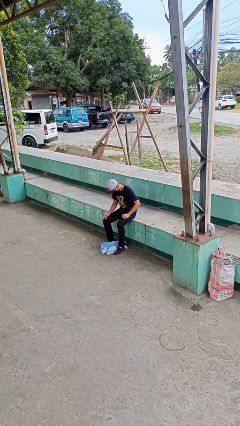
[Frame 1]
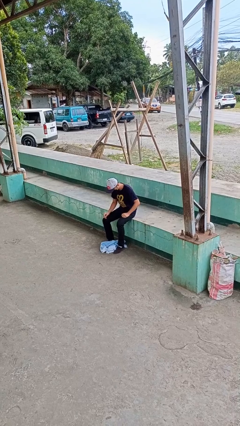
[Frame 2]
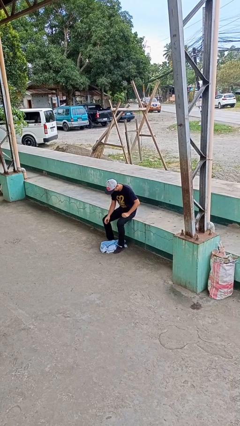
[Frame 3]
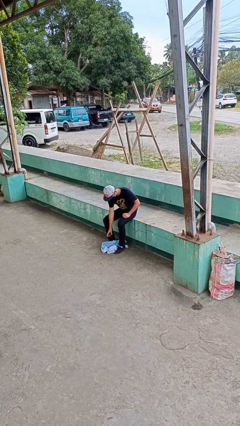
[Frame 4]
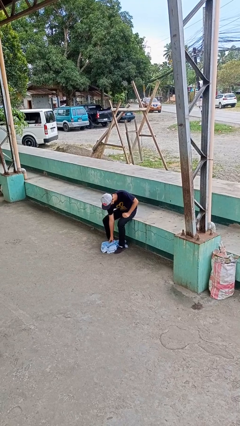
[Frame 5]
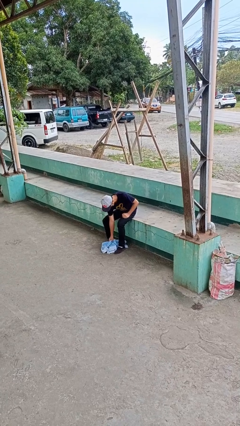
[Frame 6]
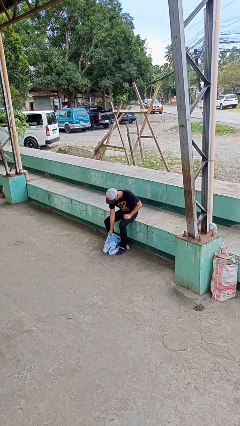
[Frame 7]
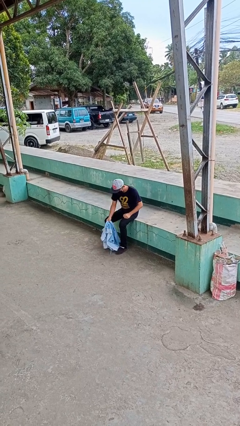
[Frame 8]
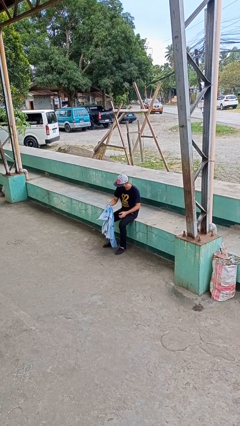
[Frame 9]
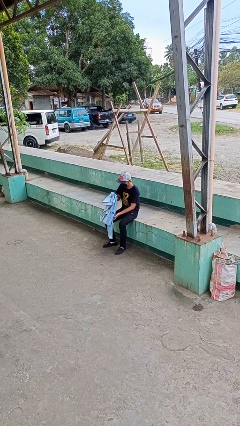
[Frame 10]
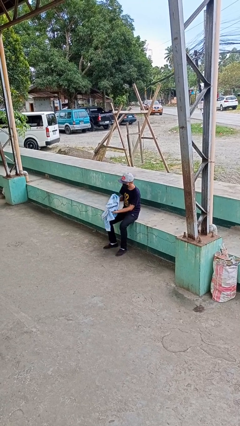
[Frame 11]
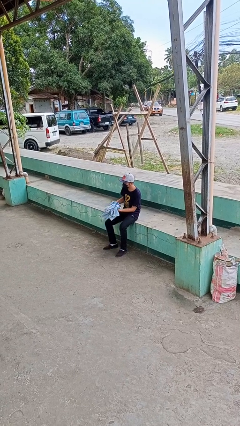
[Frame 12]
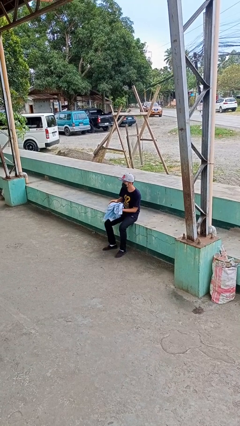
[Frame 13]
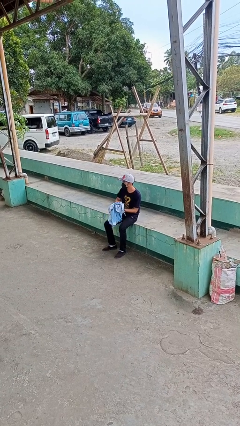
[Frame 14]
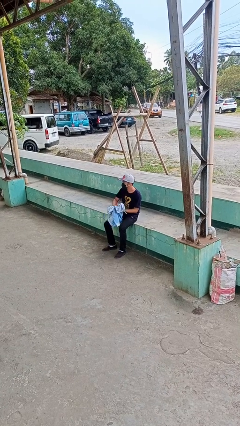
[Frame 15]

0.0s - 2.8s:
person picks up object from floor

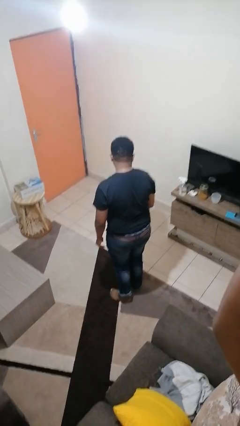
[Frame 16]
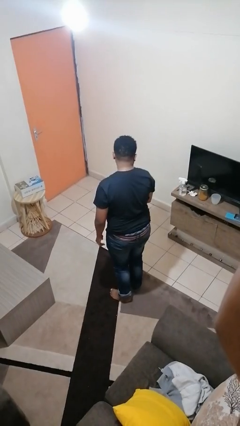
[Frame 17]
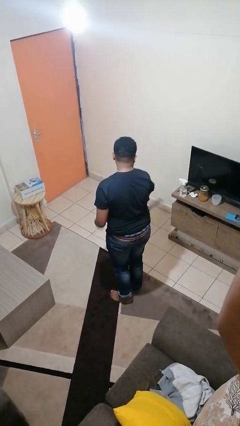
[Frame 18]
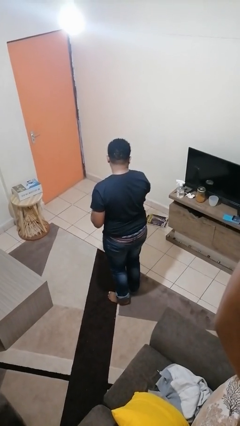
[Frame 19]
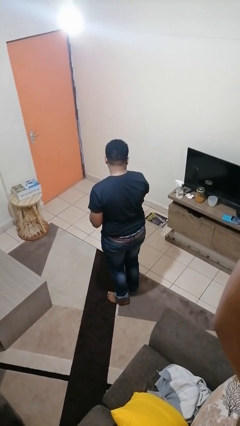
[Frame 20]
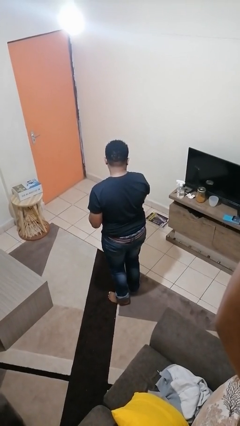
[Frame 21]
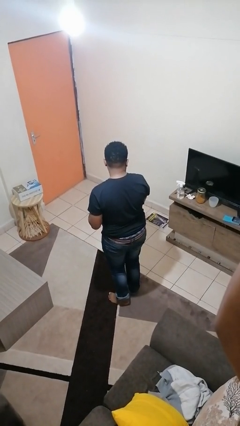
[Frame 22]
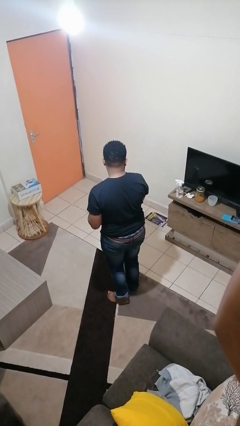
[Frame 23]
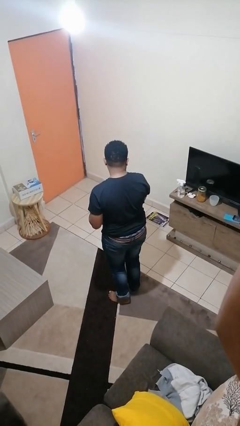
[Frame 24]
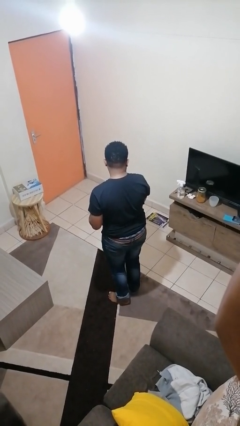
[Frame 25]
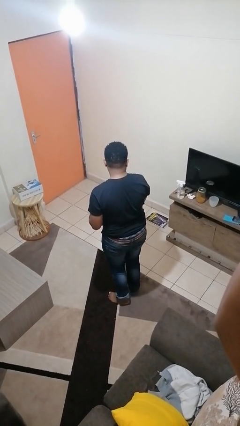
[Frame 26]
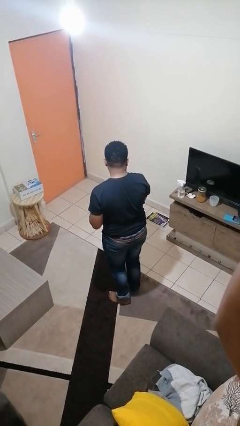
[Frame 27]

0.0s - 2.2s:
person throws object to ground

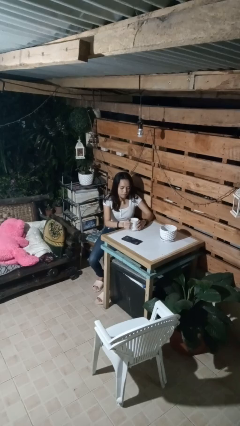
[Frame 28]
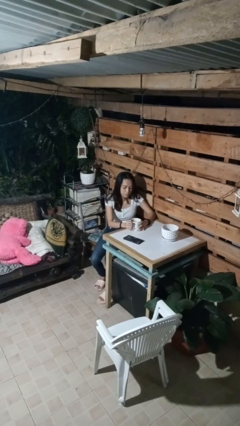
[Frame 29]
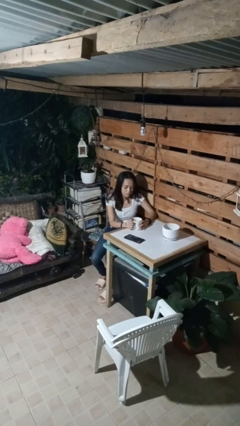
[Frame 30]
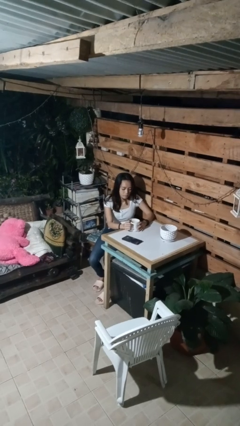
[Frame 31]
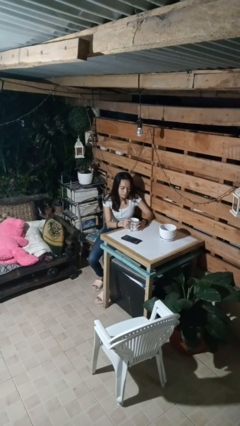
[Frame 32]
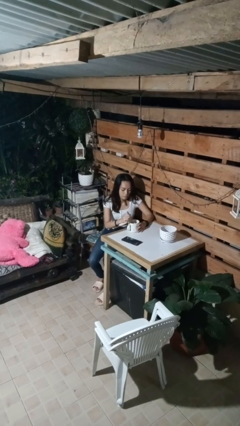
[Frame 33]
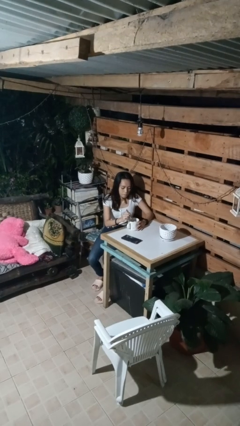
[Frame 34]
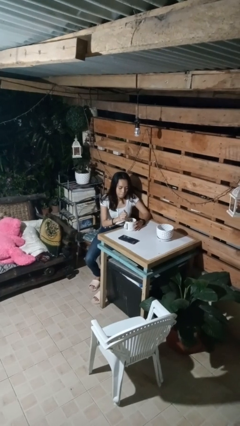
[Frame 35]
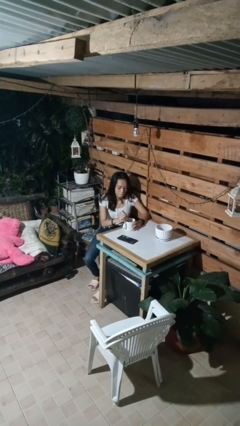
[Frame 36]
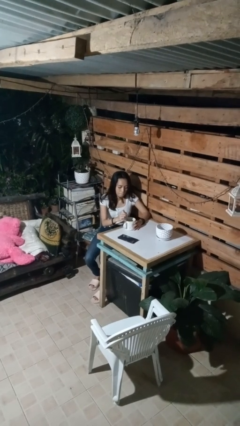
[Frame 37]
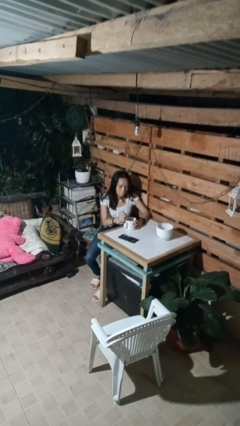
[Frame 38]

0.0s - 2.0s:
person stirs mug

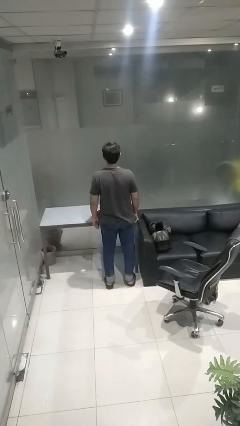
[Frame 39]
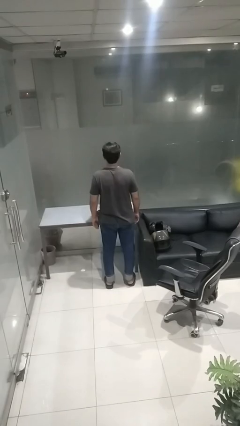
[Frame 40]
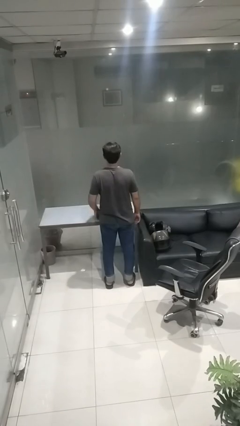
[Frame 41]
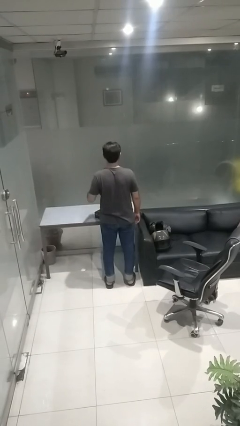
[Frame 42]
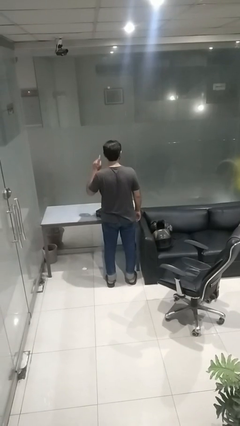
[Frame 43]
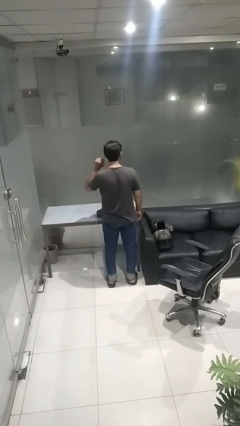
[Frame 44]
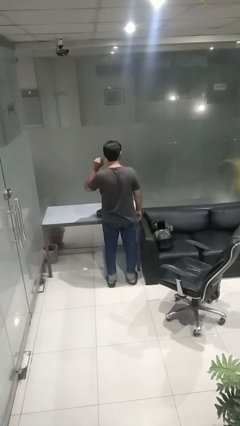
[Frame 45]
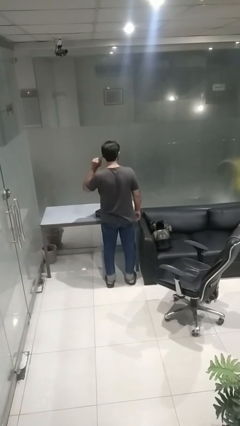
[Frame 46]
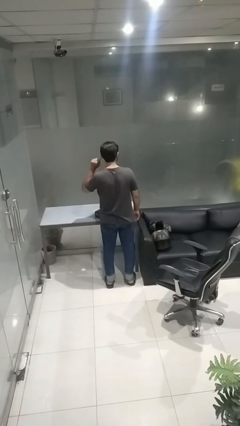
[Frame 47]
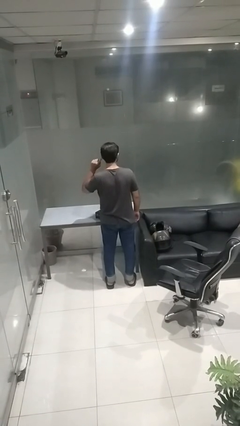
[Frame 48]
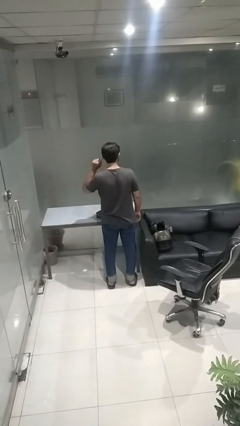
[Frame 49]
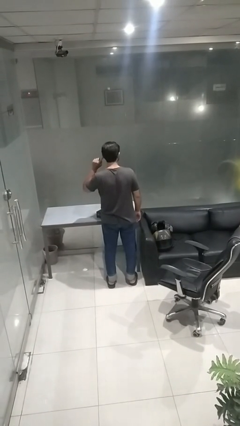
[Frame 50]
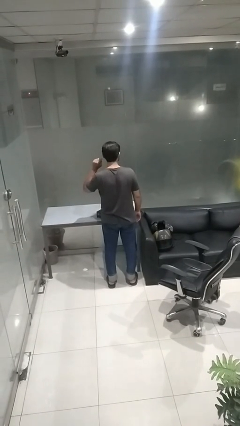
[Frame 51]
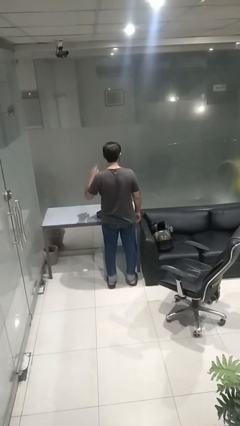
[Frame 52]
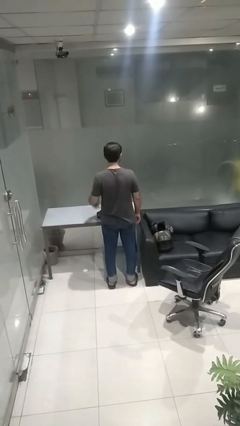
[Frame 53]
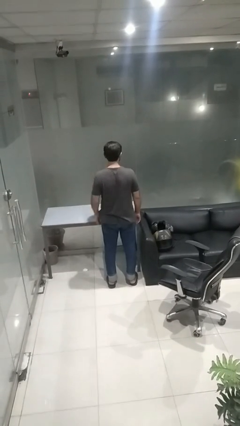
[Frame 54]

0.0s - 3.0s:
person gestures listen closely

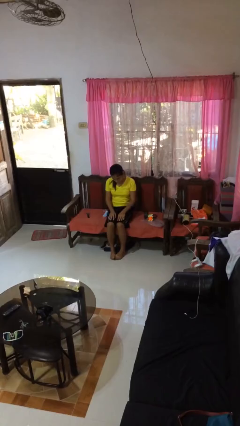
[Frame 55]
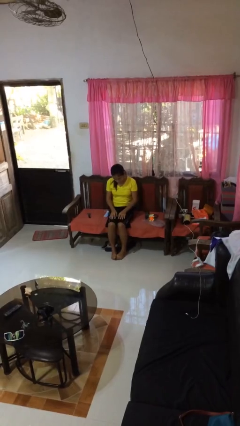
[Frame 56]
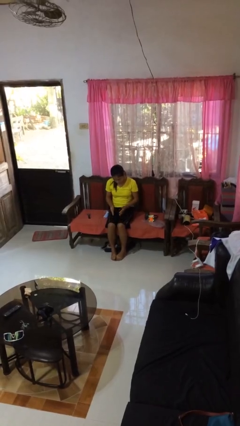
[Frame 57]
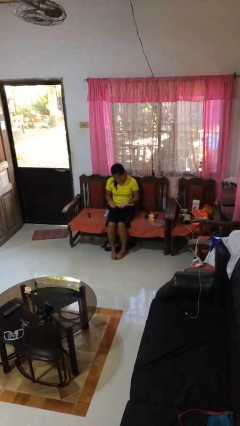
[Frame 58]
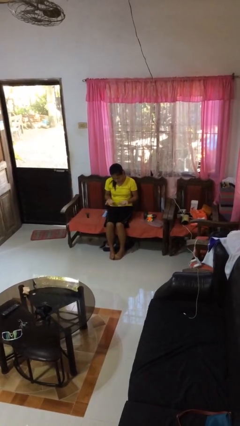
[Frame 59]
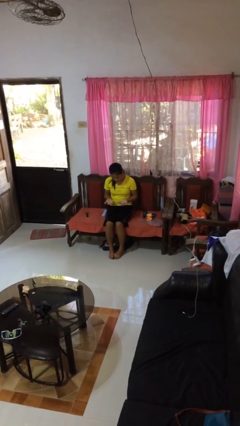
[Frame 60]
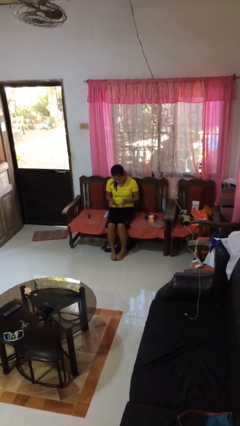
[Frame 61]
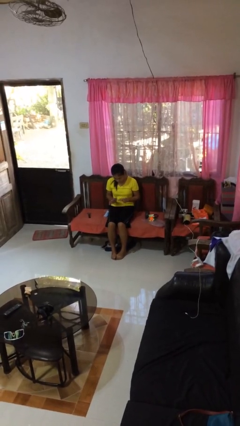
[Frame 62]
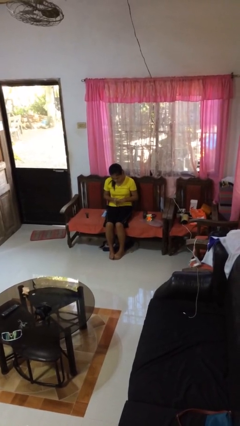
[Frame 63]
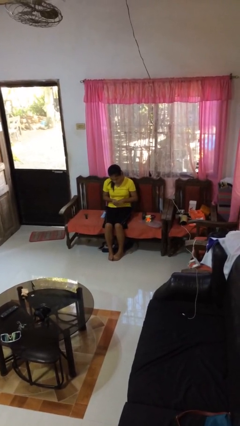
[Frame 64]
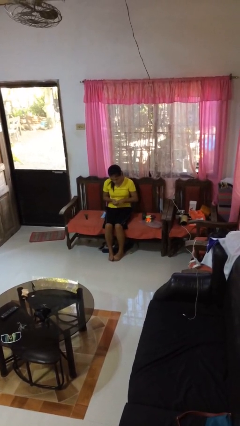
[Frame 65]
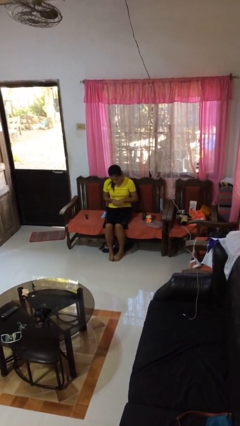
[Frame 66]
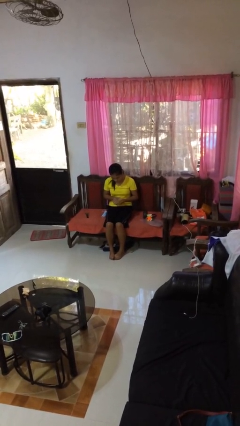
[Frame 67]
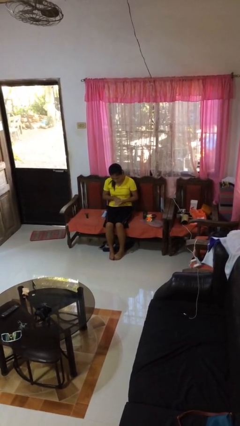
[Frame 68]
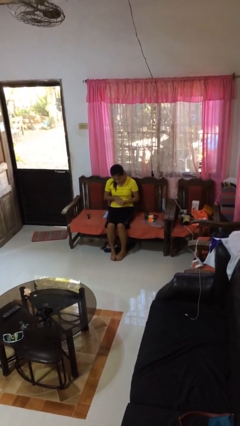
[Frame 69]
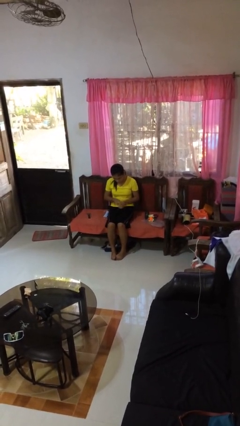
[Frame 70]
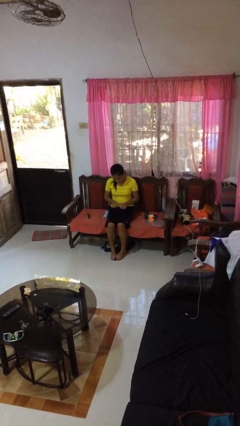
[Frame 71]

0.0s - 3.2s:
person looks at hands in lap

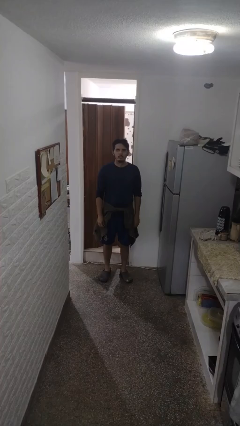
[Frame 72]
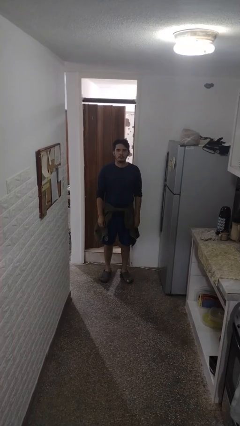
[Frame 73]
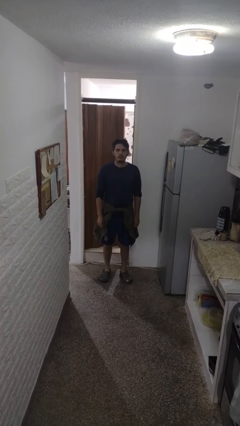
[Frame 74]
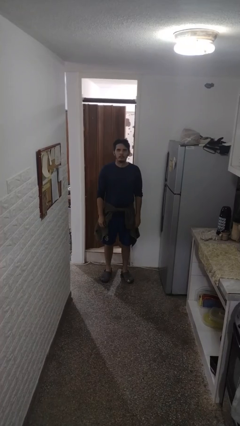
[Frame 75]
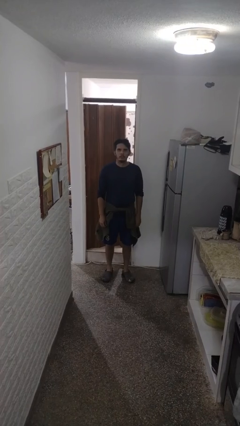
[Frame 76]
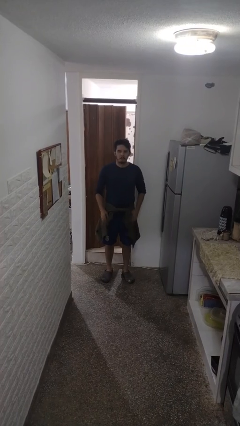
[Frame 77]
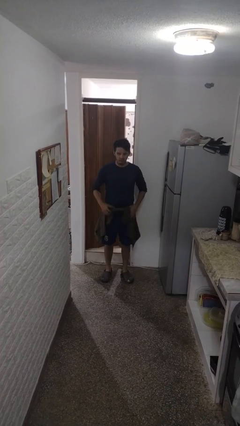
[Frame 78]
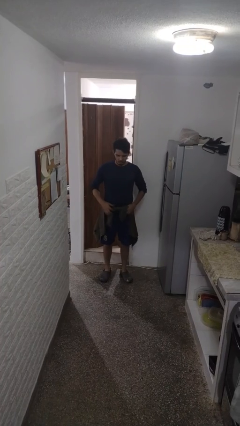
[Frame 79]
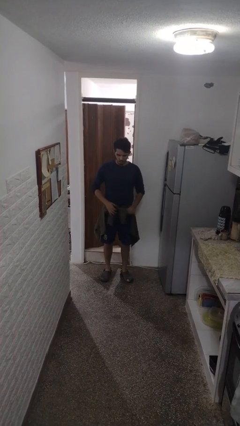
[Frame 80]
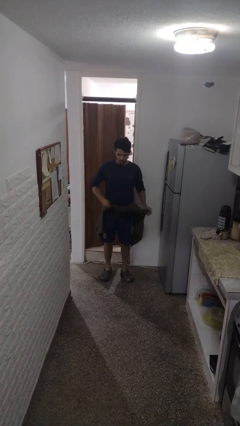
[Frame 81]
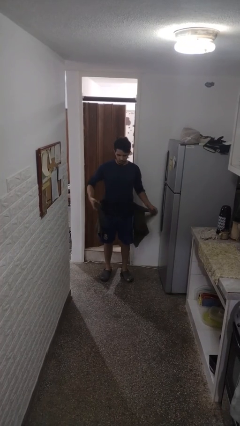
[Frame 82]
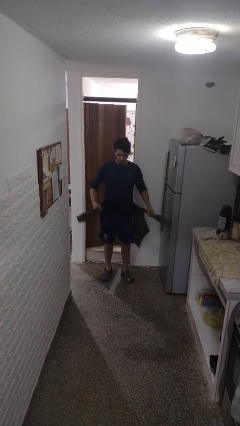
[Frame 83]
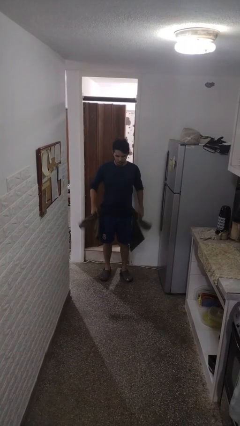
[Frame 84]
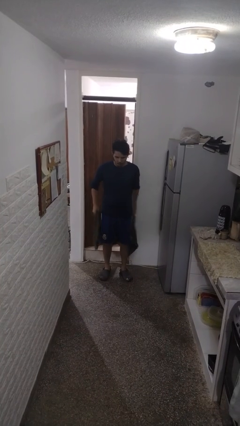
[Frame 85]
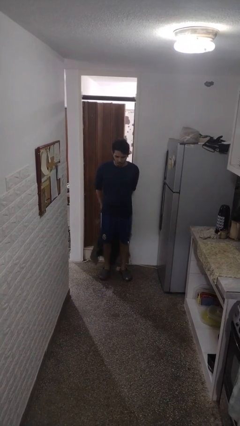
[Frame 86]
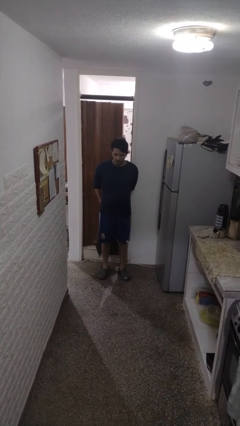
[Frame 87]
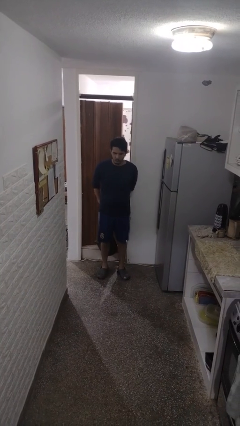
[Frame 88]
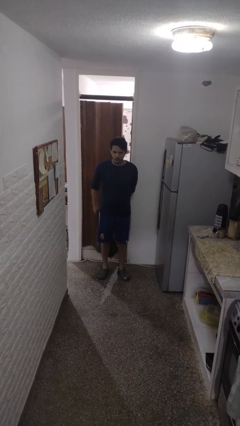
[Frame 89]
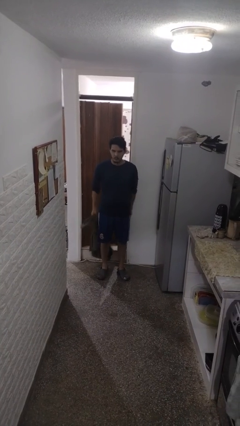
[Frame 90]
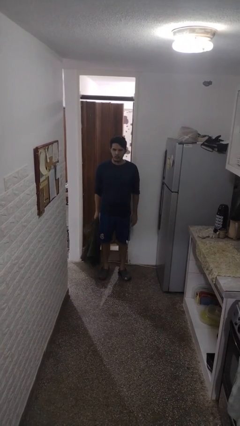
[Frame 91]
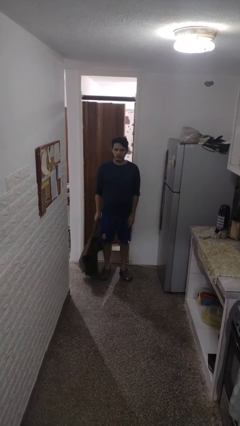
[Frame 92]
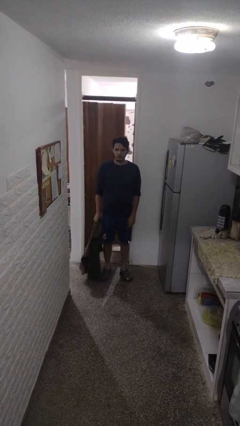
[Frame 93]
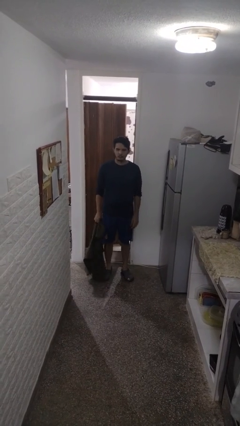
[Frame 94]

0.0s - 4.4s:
person unties jacket around waist
